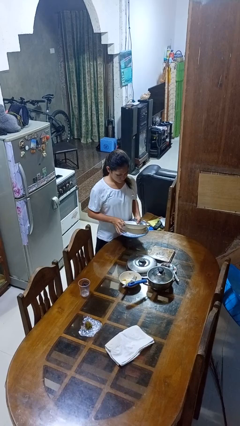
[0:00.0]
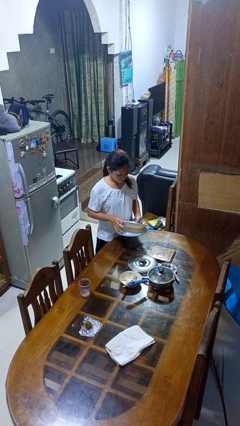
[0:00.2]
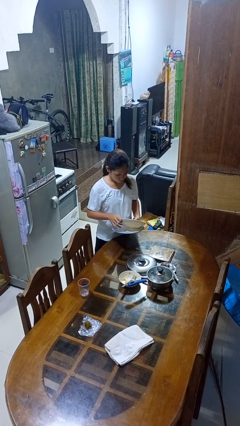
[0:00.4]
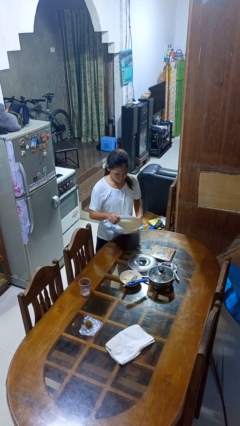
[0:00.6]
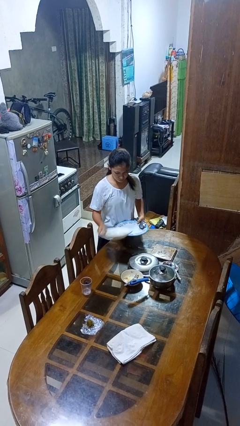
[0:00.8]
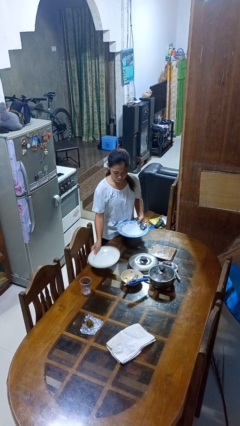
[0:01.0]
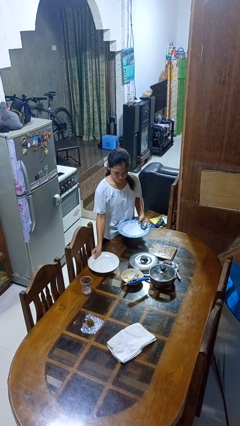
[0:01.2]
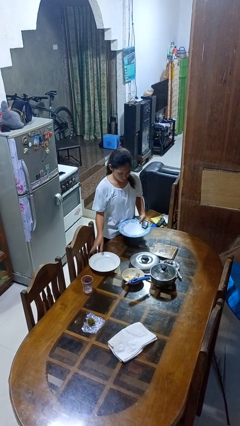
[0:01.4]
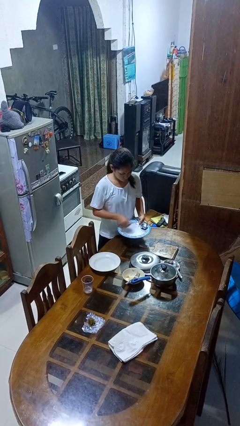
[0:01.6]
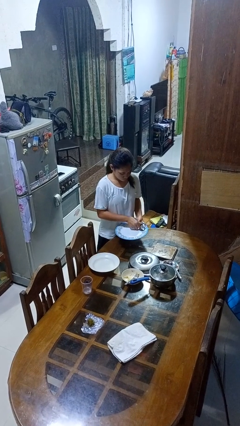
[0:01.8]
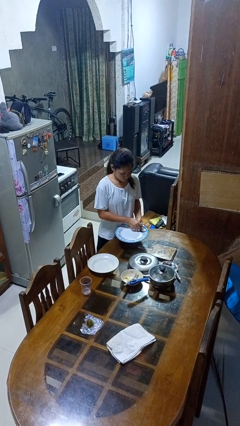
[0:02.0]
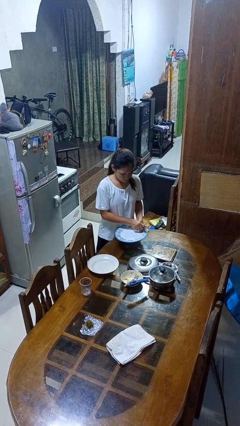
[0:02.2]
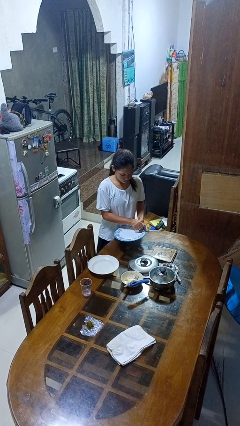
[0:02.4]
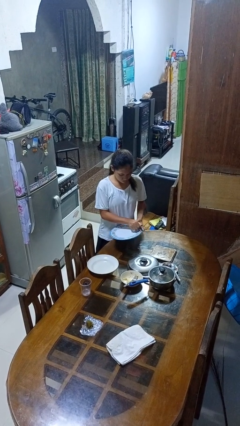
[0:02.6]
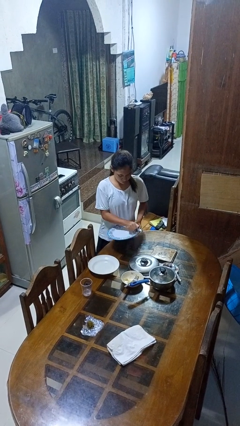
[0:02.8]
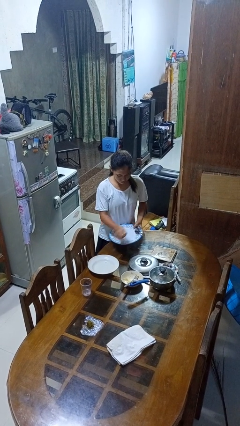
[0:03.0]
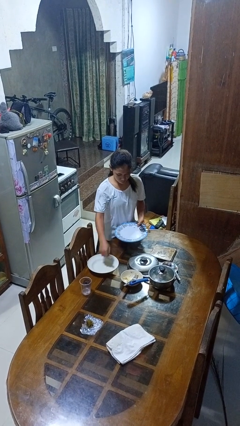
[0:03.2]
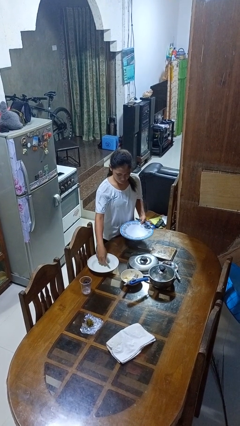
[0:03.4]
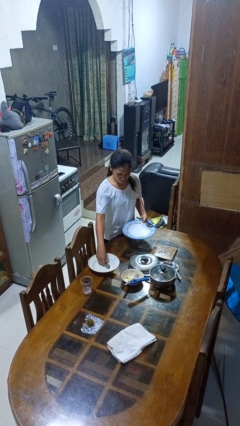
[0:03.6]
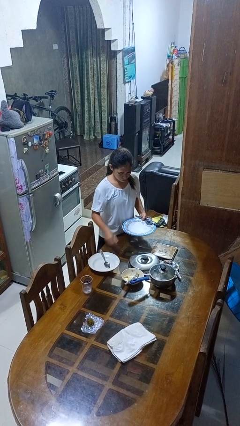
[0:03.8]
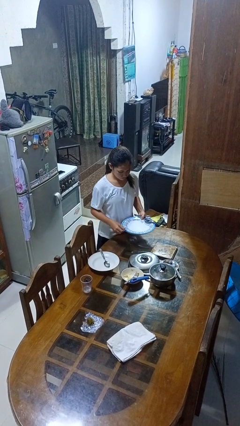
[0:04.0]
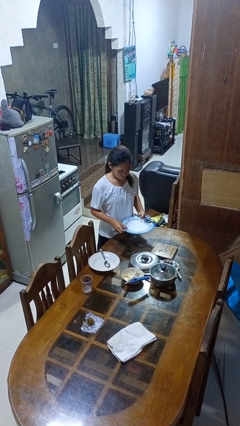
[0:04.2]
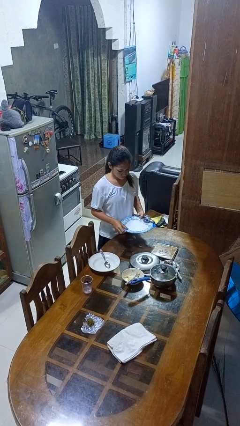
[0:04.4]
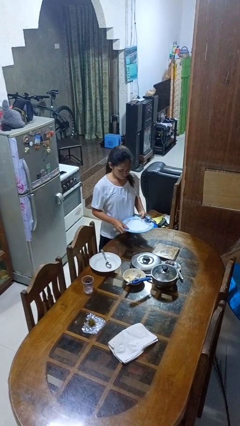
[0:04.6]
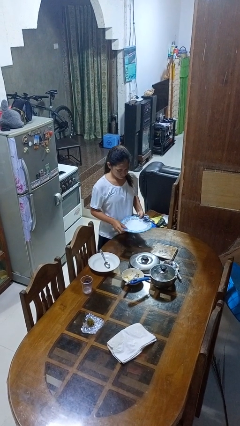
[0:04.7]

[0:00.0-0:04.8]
person sets table

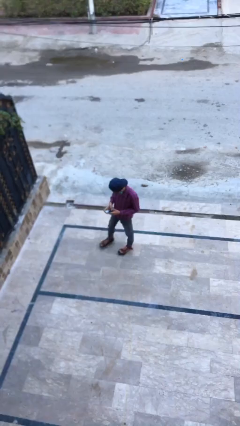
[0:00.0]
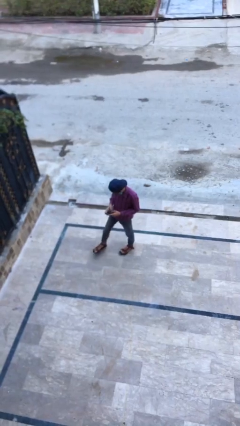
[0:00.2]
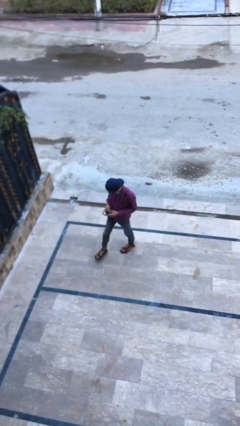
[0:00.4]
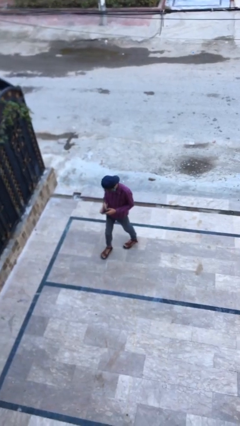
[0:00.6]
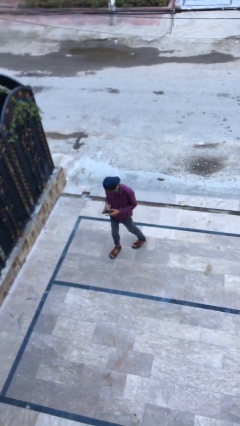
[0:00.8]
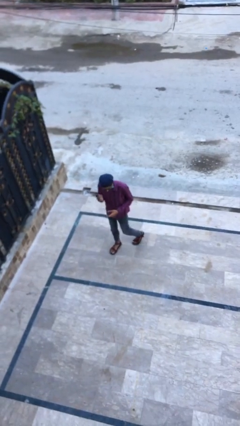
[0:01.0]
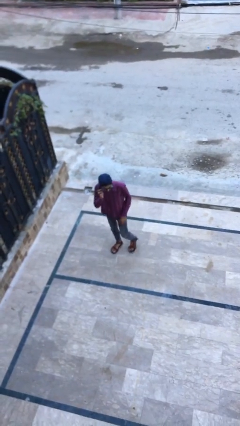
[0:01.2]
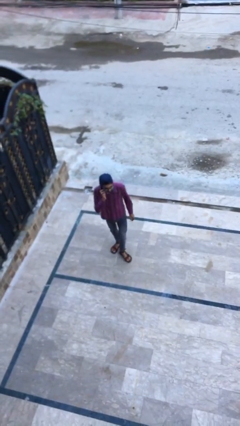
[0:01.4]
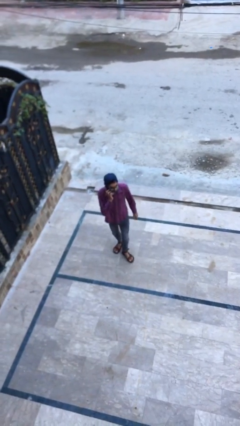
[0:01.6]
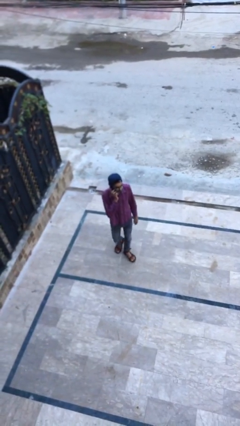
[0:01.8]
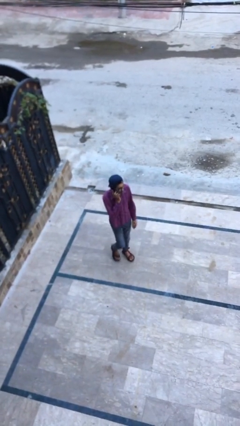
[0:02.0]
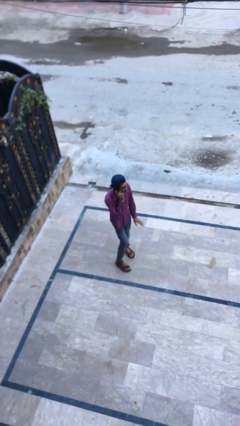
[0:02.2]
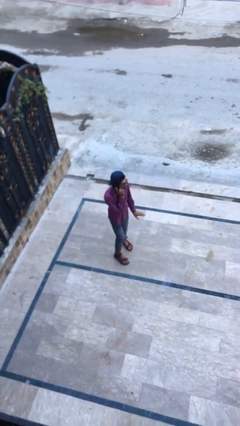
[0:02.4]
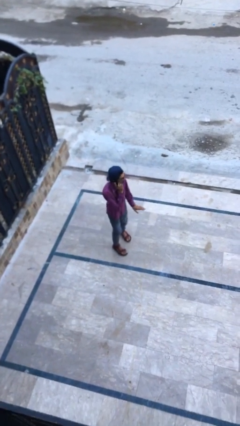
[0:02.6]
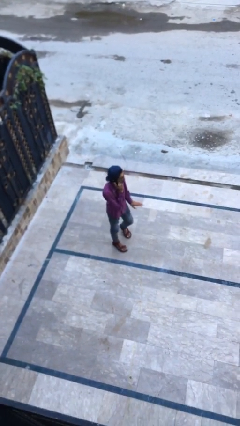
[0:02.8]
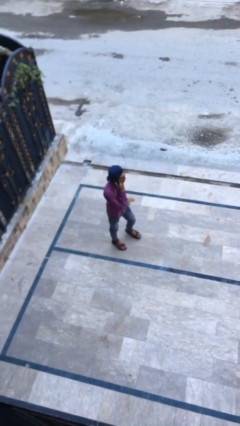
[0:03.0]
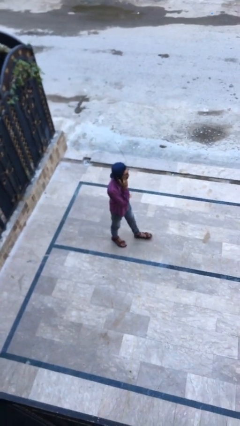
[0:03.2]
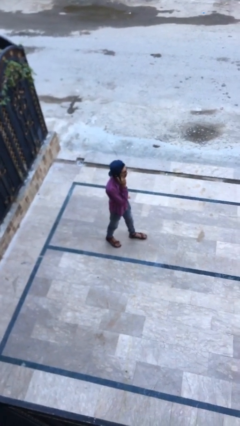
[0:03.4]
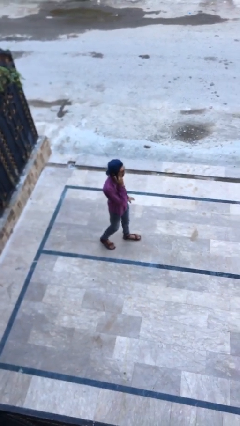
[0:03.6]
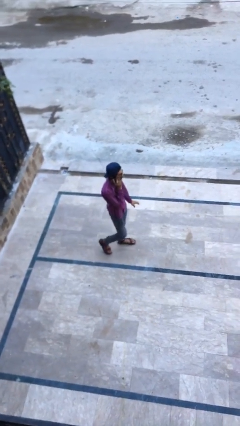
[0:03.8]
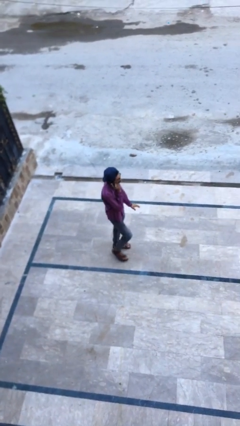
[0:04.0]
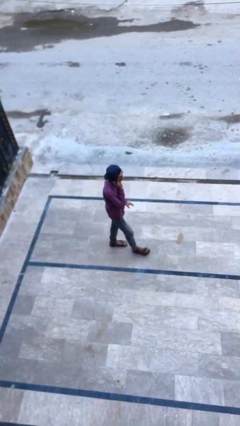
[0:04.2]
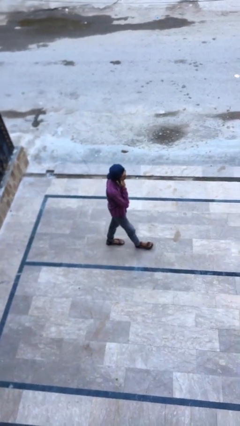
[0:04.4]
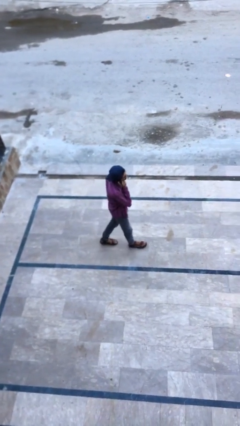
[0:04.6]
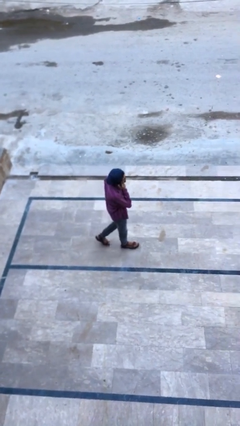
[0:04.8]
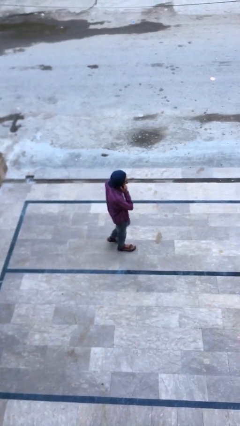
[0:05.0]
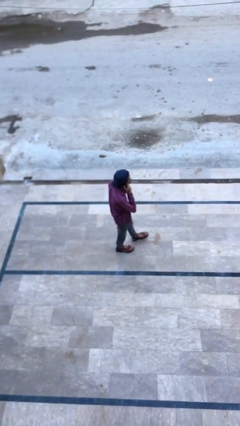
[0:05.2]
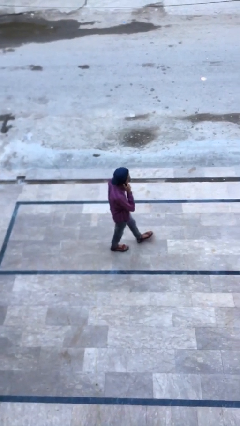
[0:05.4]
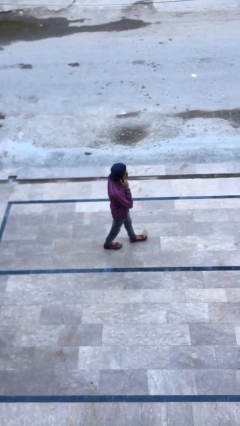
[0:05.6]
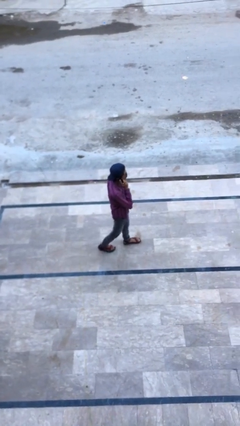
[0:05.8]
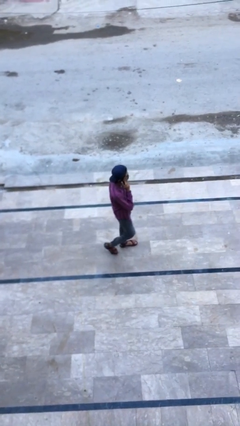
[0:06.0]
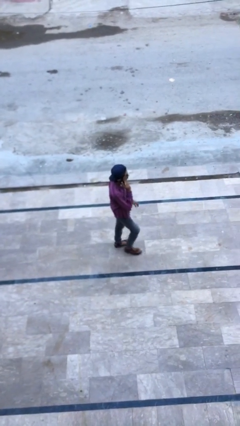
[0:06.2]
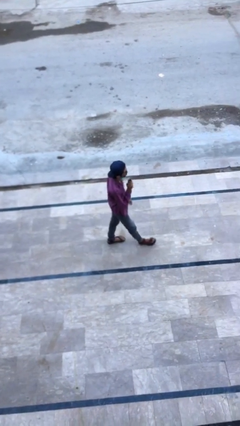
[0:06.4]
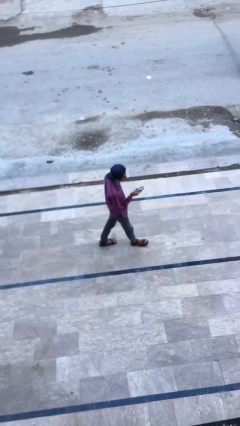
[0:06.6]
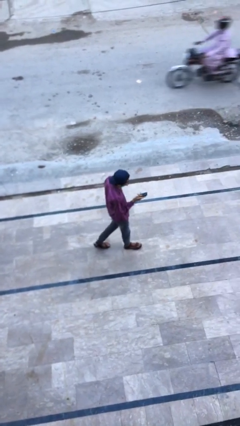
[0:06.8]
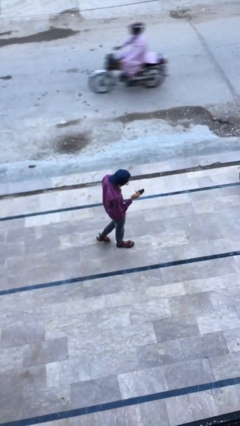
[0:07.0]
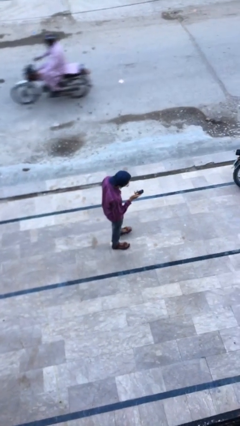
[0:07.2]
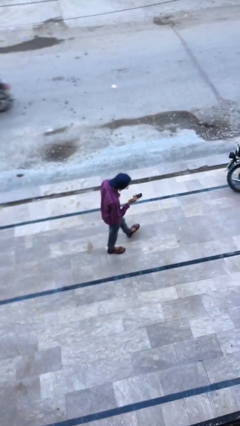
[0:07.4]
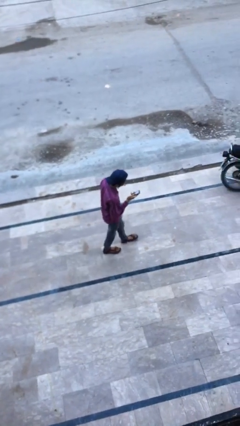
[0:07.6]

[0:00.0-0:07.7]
person talks on phone

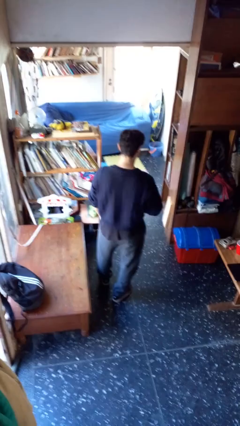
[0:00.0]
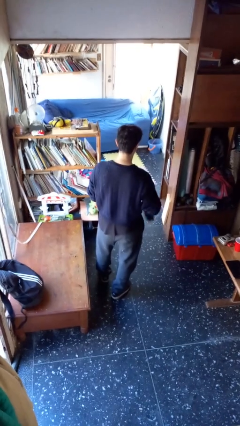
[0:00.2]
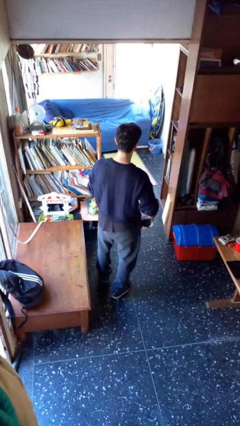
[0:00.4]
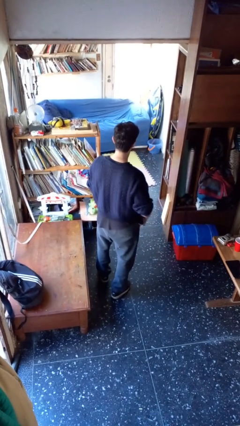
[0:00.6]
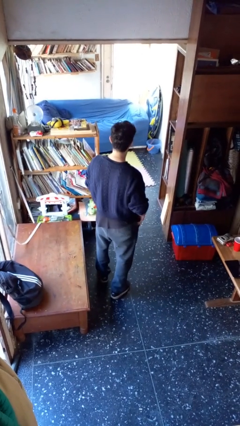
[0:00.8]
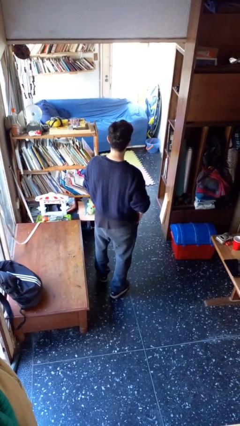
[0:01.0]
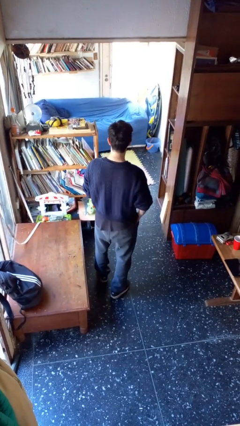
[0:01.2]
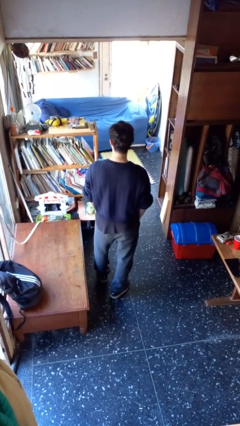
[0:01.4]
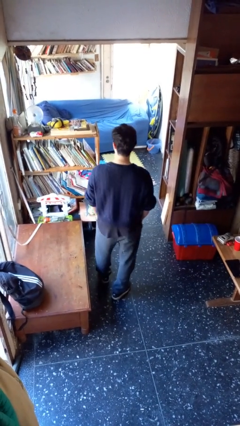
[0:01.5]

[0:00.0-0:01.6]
person puts phone into pocket

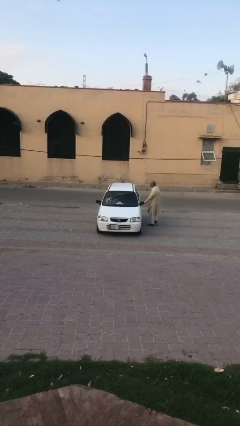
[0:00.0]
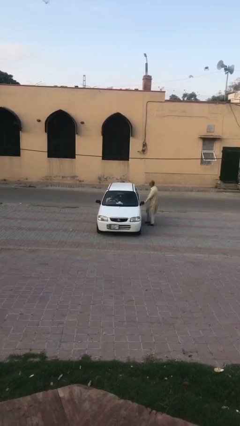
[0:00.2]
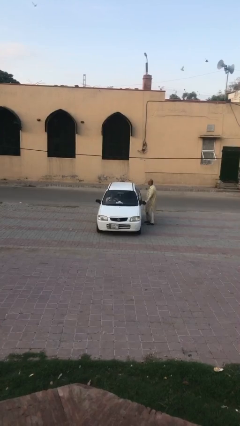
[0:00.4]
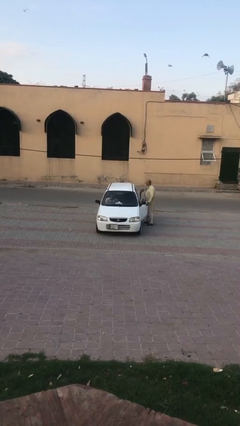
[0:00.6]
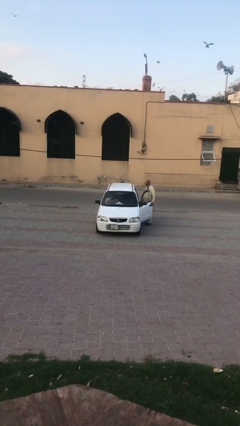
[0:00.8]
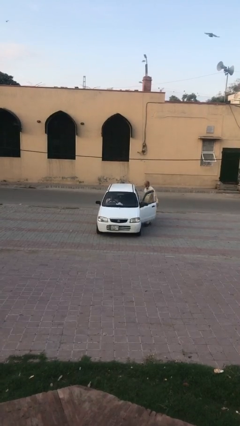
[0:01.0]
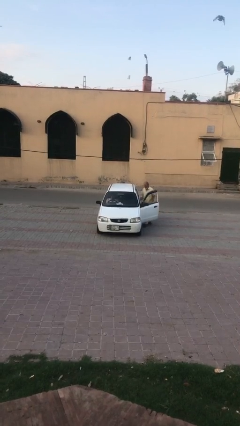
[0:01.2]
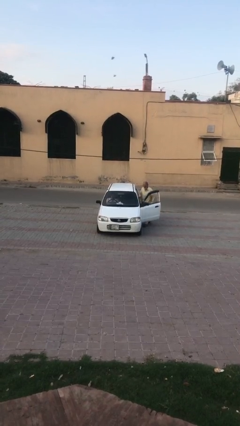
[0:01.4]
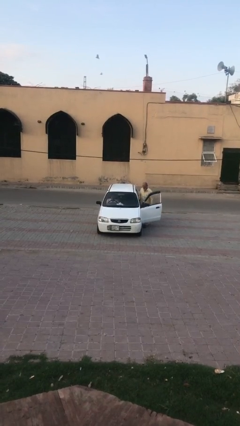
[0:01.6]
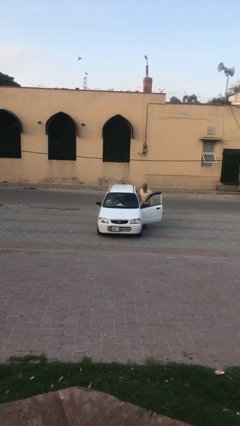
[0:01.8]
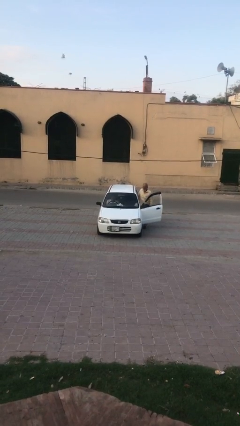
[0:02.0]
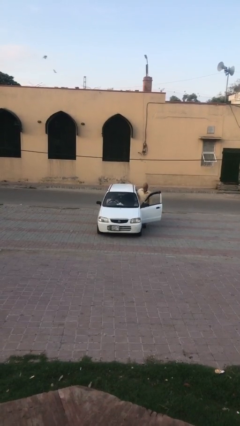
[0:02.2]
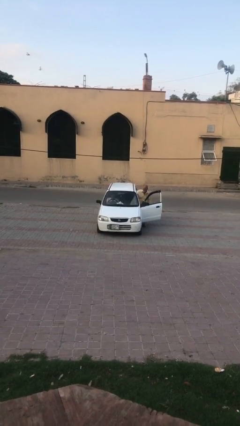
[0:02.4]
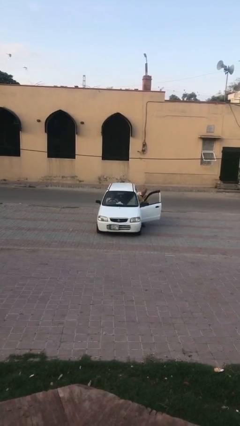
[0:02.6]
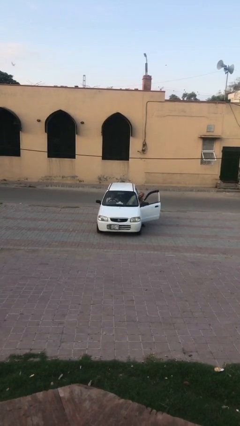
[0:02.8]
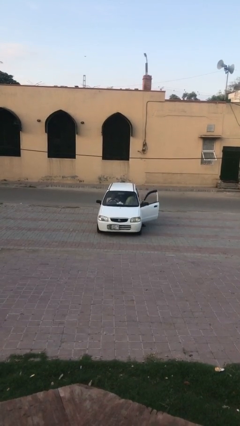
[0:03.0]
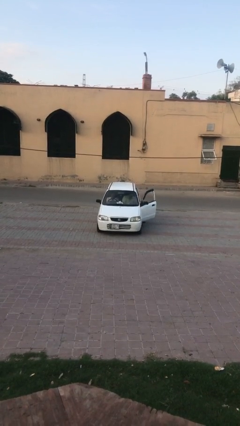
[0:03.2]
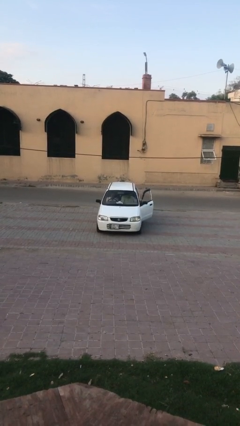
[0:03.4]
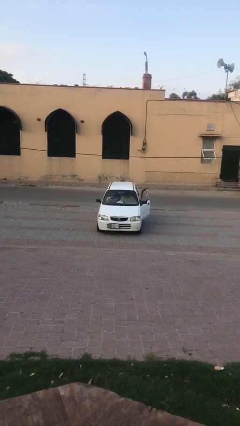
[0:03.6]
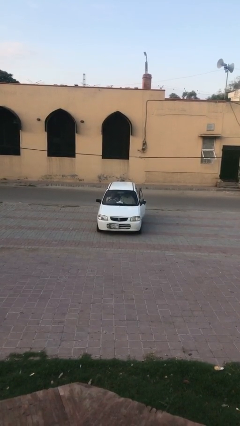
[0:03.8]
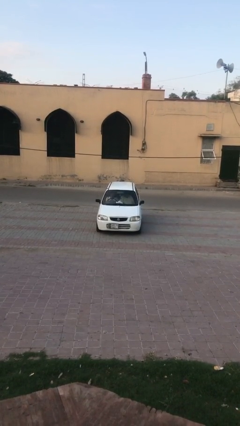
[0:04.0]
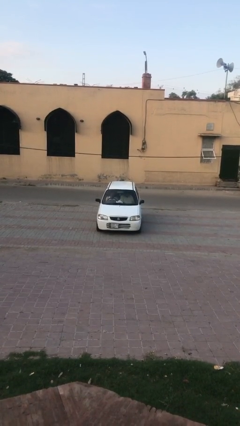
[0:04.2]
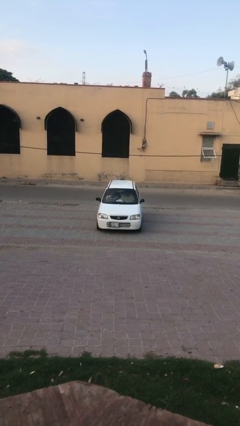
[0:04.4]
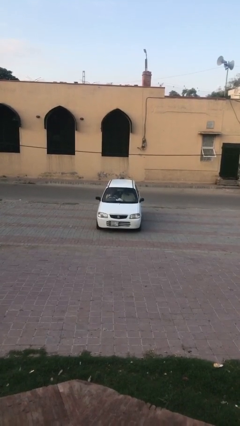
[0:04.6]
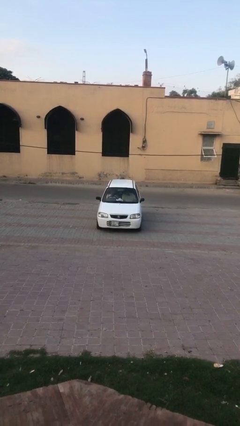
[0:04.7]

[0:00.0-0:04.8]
car picks up person
